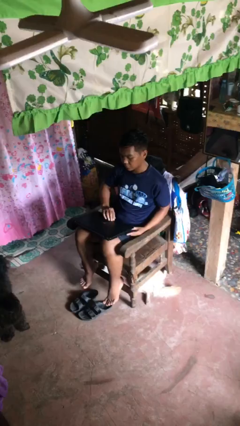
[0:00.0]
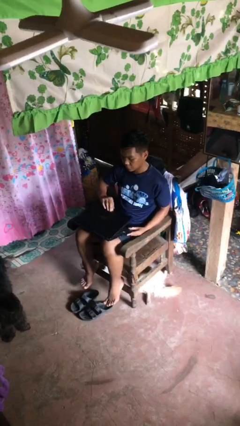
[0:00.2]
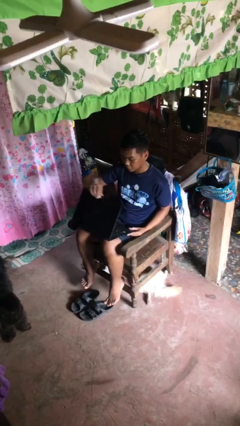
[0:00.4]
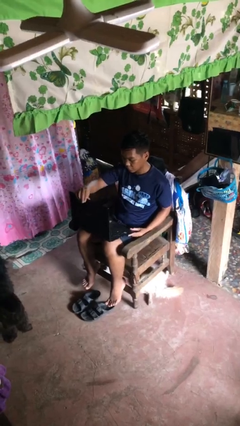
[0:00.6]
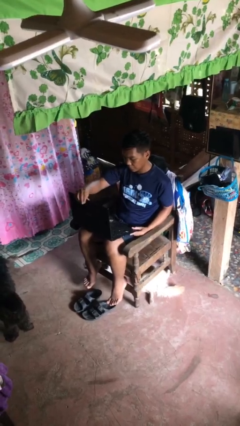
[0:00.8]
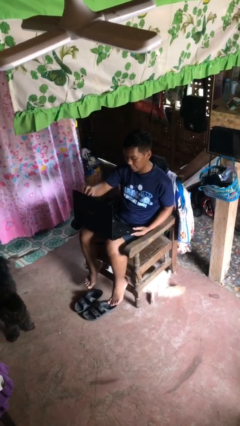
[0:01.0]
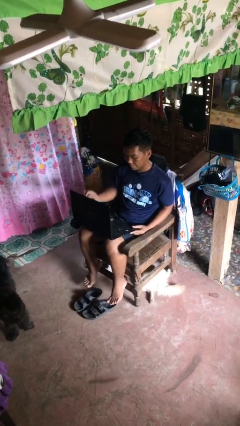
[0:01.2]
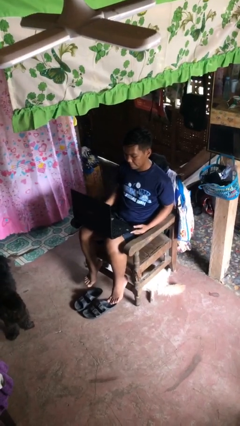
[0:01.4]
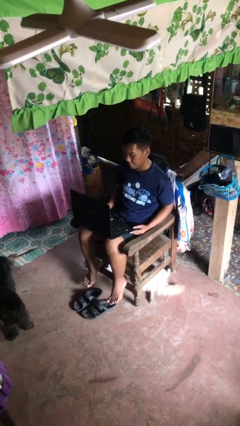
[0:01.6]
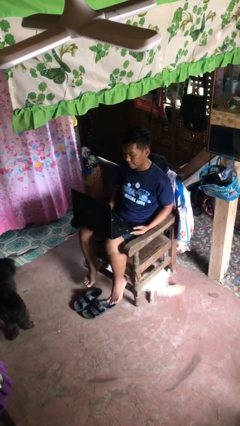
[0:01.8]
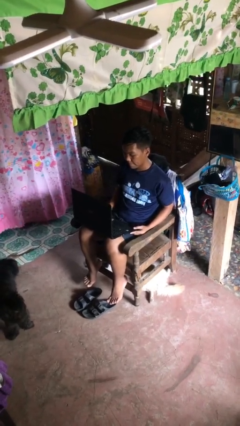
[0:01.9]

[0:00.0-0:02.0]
person opens laptop

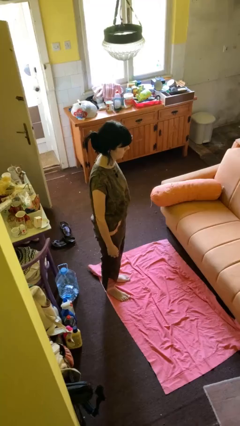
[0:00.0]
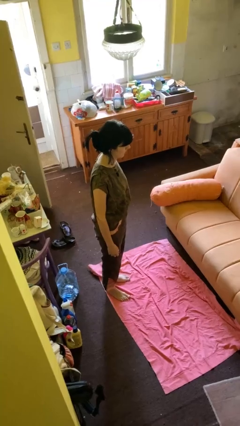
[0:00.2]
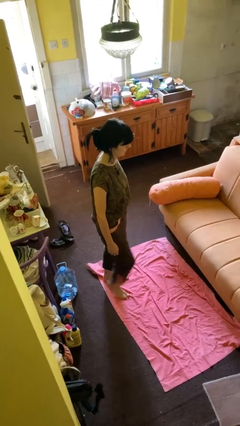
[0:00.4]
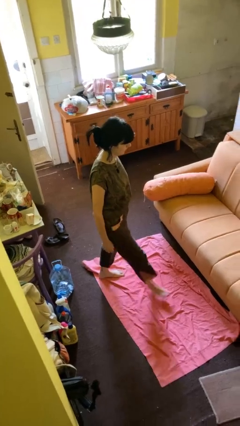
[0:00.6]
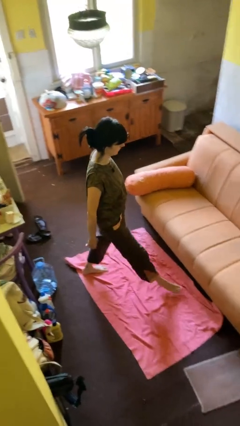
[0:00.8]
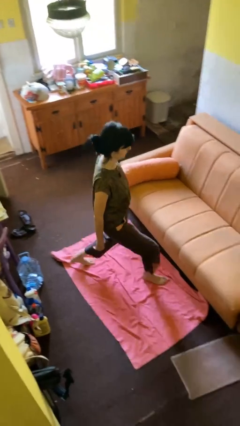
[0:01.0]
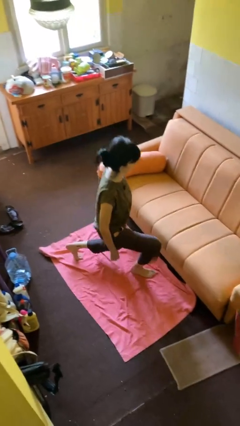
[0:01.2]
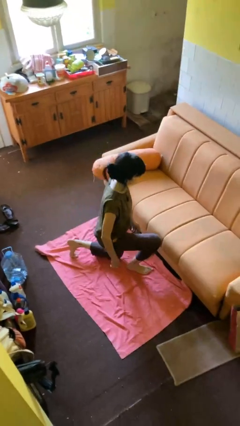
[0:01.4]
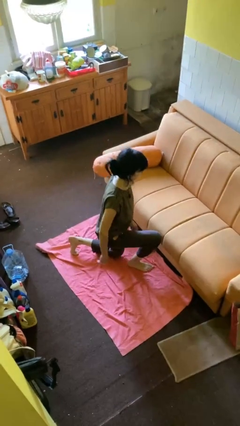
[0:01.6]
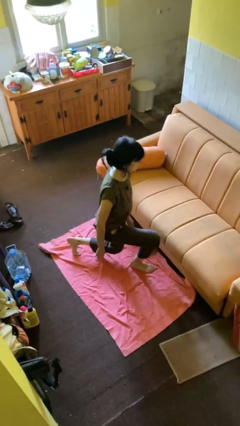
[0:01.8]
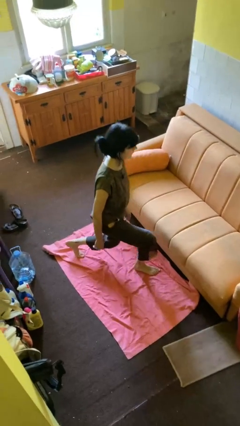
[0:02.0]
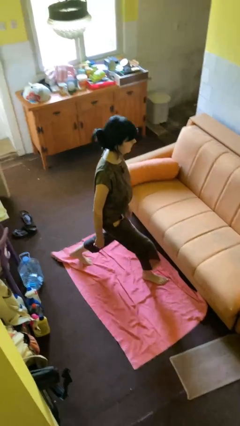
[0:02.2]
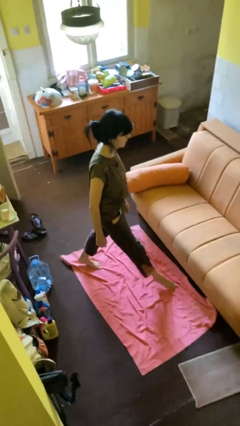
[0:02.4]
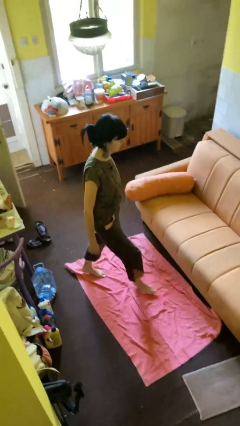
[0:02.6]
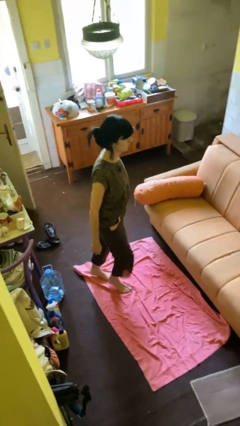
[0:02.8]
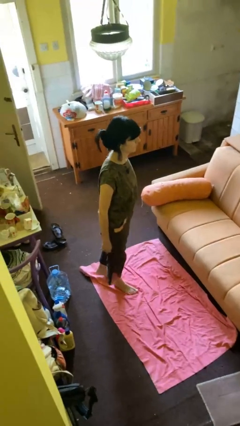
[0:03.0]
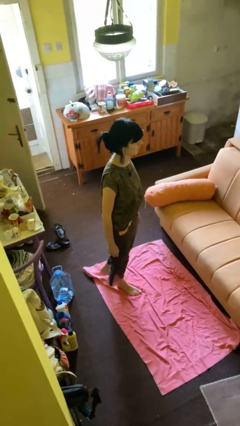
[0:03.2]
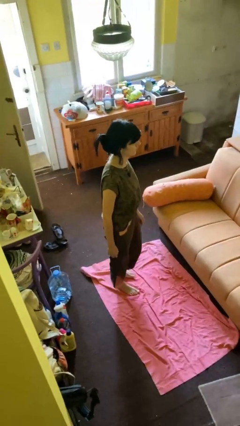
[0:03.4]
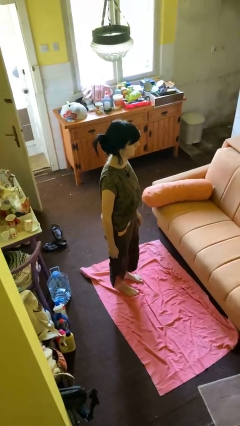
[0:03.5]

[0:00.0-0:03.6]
person exercises with lunges

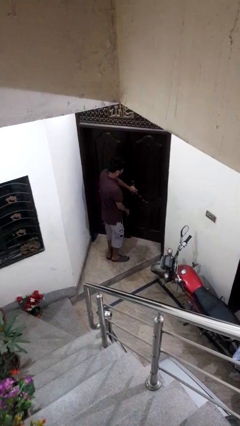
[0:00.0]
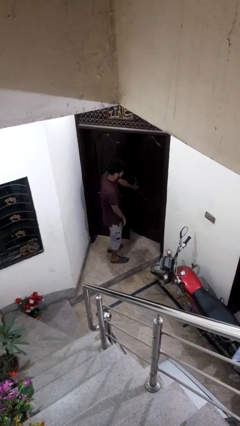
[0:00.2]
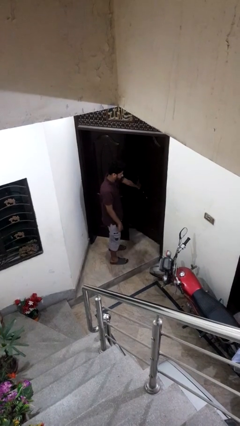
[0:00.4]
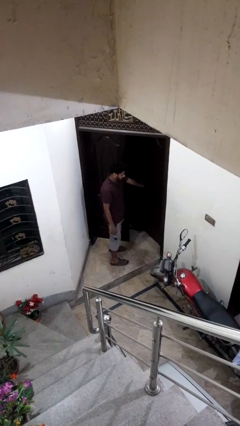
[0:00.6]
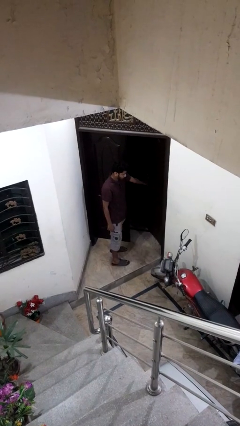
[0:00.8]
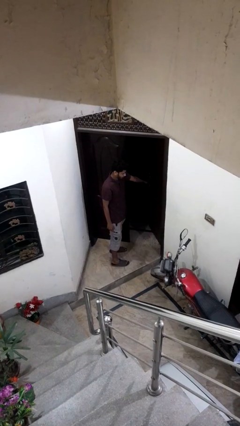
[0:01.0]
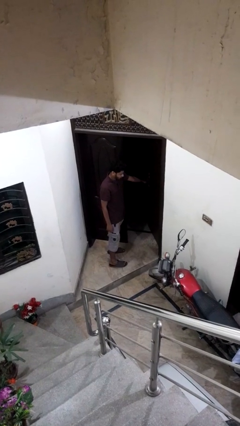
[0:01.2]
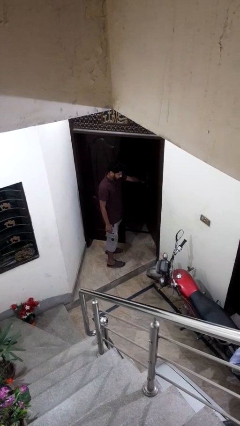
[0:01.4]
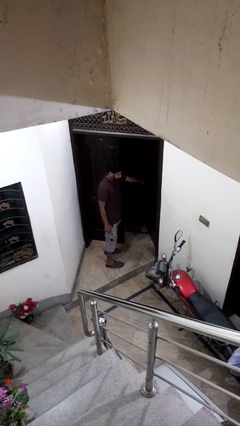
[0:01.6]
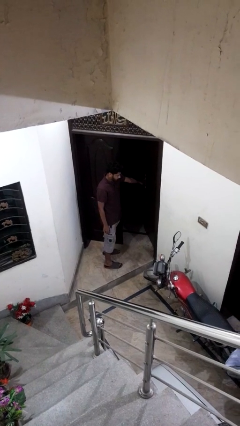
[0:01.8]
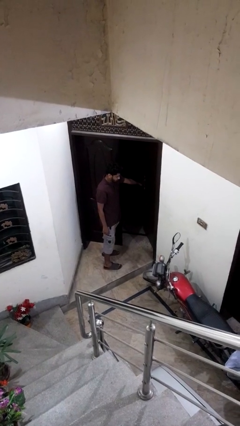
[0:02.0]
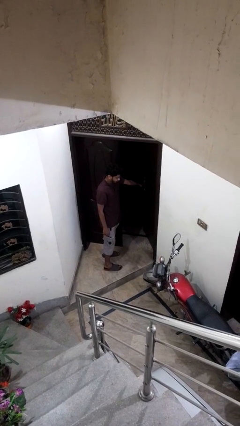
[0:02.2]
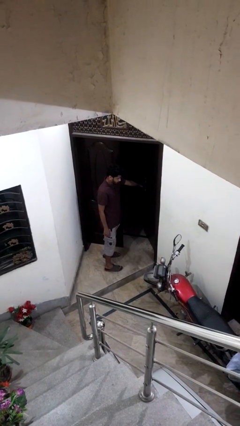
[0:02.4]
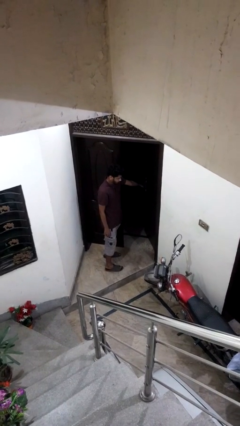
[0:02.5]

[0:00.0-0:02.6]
person opens facility door

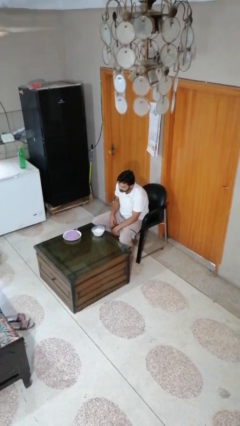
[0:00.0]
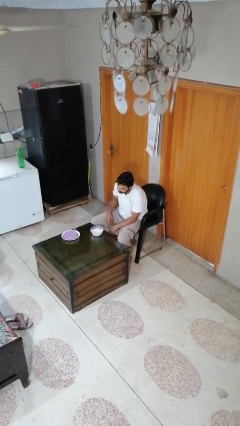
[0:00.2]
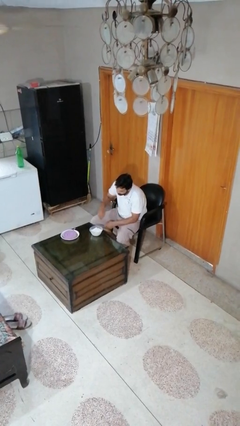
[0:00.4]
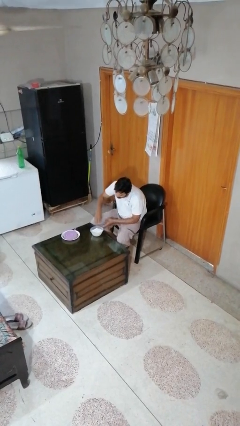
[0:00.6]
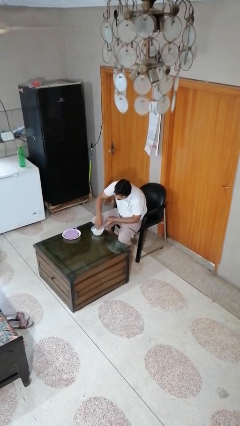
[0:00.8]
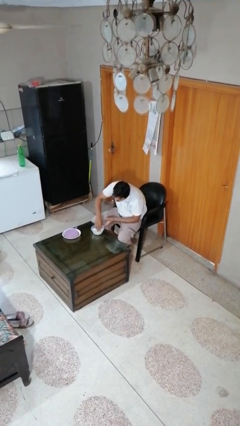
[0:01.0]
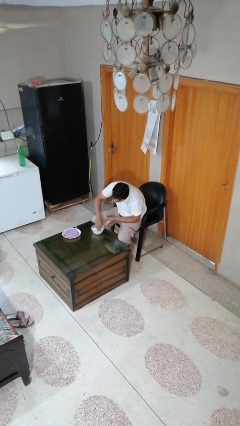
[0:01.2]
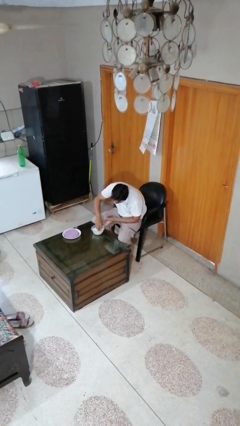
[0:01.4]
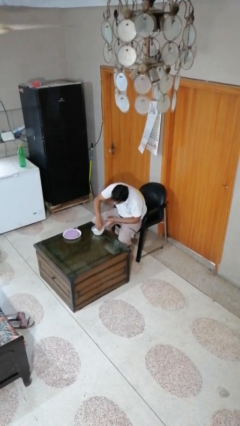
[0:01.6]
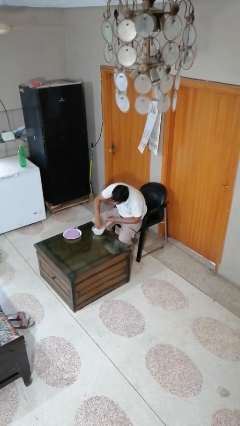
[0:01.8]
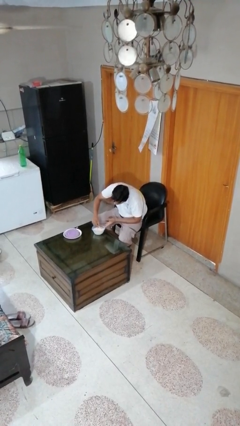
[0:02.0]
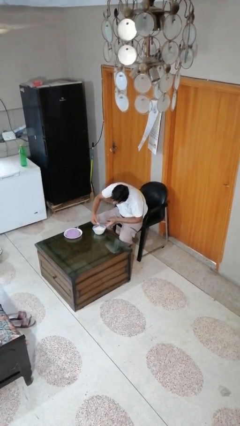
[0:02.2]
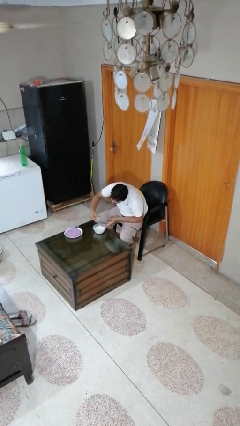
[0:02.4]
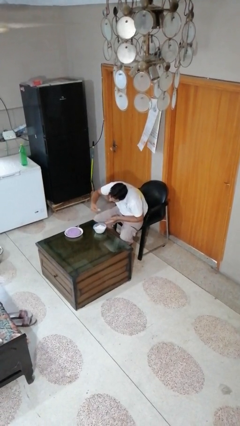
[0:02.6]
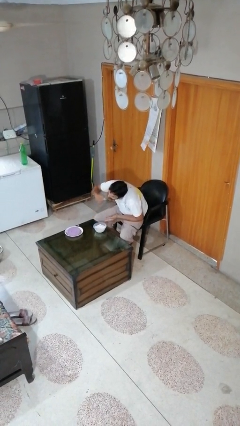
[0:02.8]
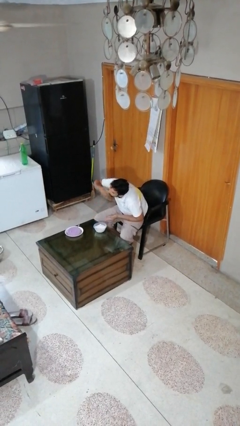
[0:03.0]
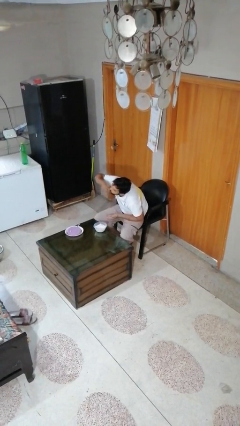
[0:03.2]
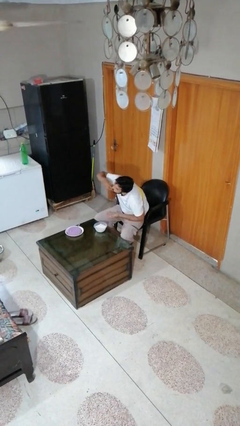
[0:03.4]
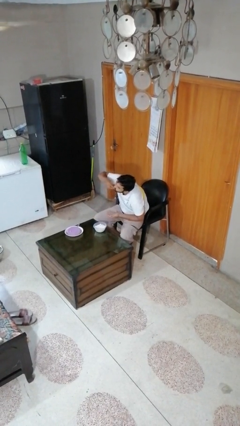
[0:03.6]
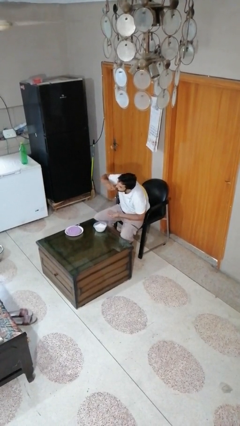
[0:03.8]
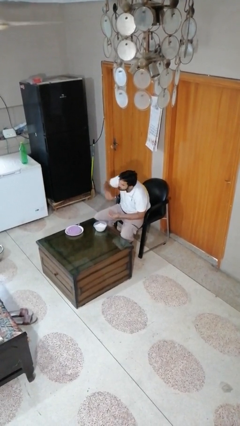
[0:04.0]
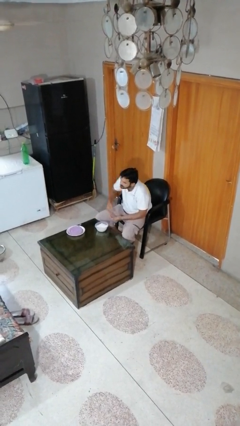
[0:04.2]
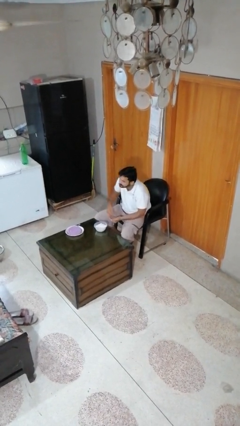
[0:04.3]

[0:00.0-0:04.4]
person eats with hands

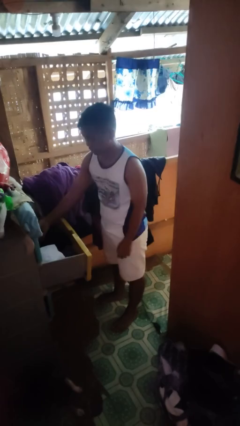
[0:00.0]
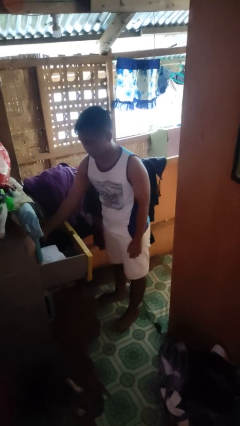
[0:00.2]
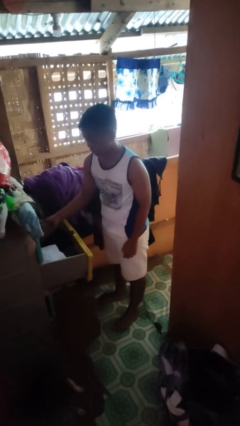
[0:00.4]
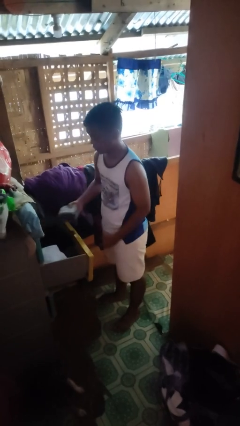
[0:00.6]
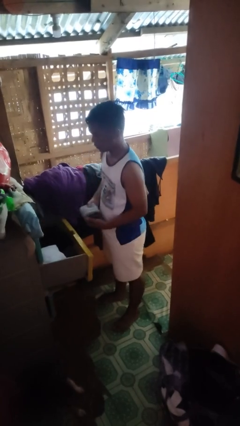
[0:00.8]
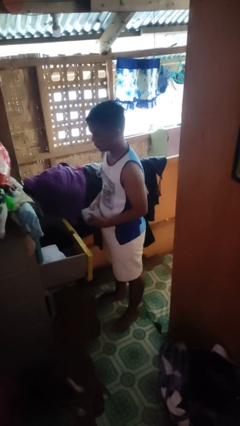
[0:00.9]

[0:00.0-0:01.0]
person takes clothes from dresser

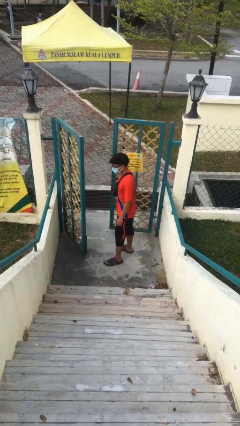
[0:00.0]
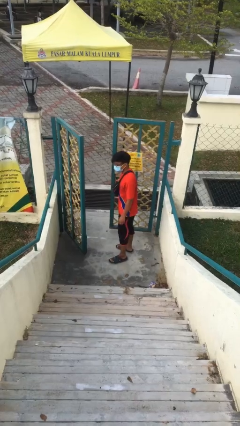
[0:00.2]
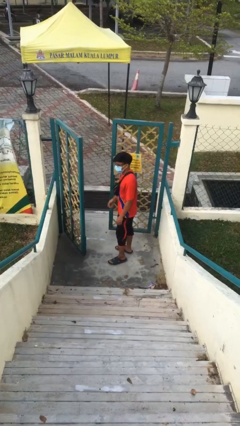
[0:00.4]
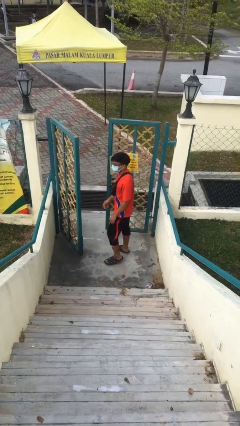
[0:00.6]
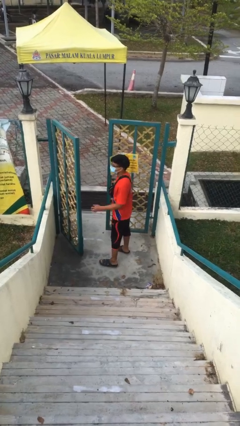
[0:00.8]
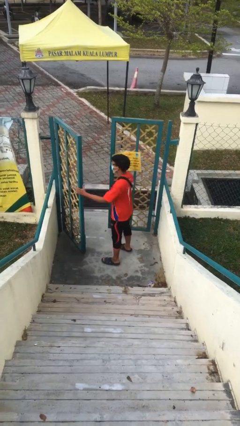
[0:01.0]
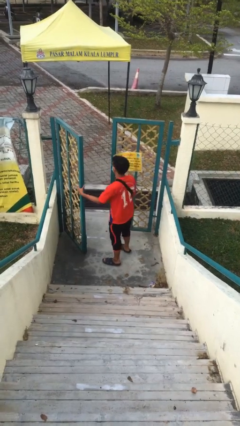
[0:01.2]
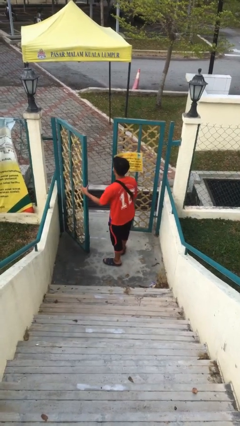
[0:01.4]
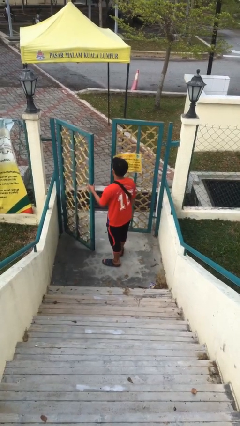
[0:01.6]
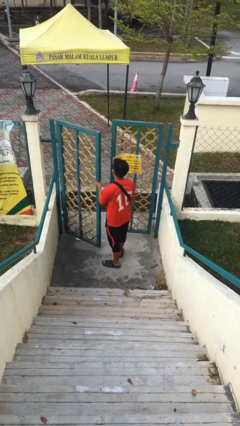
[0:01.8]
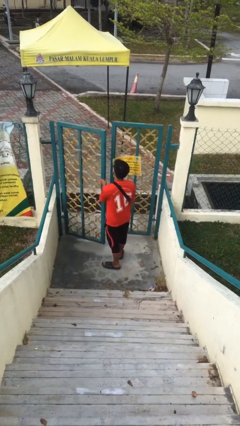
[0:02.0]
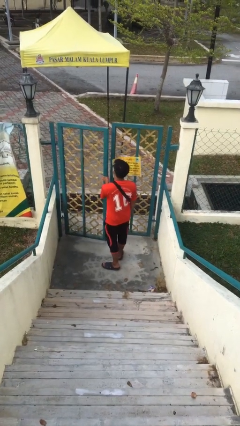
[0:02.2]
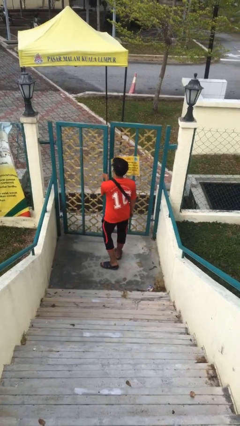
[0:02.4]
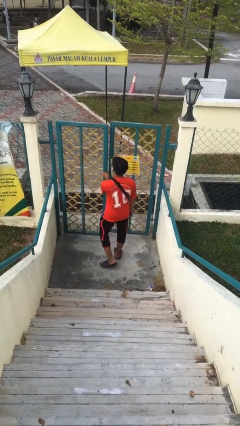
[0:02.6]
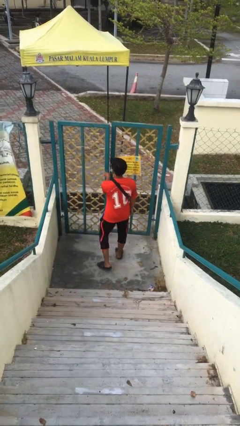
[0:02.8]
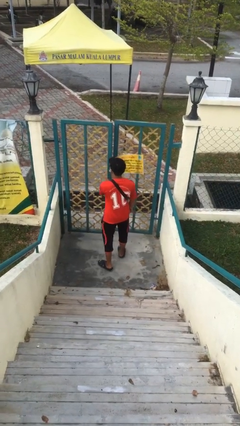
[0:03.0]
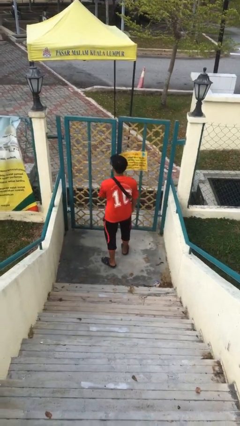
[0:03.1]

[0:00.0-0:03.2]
person closes facility door

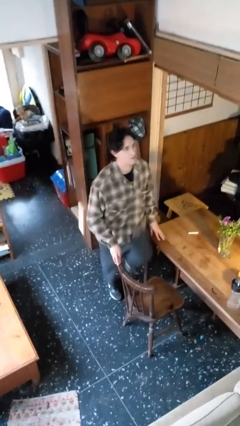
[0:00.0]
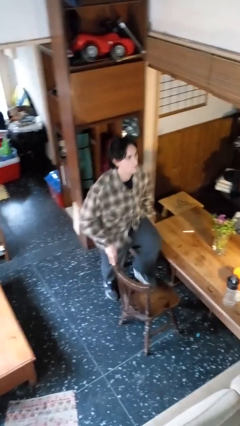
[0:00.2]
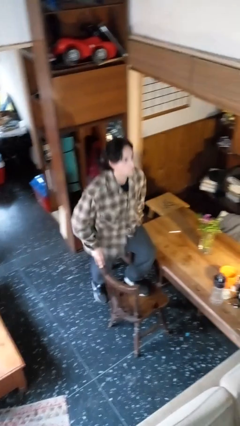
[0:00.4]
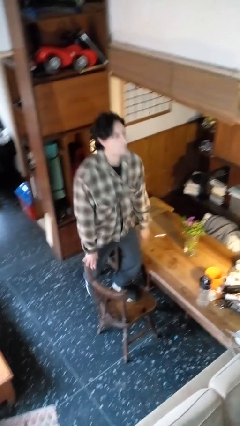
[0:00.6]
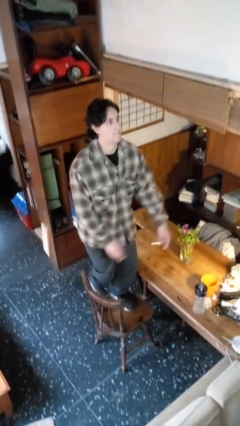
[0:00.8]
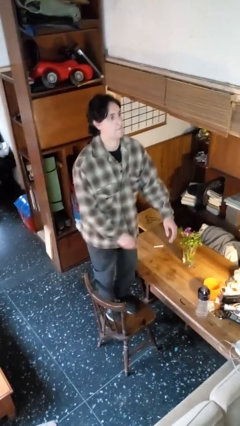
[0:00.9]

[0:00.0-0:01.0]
person climbs on chair
